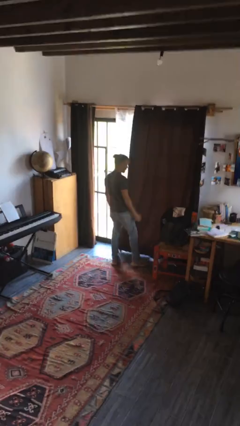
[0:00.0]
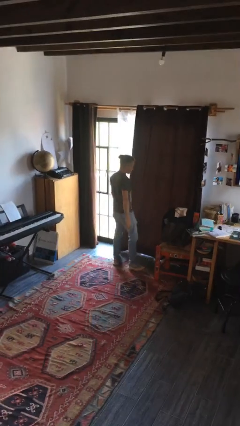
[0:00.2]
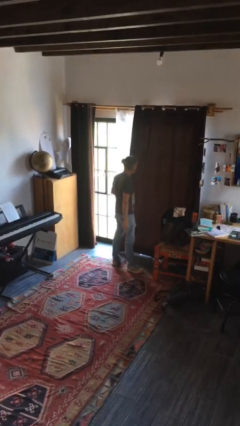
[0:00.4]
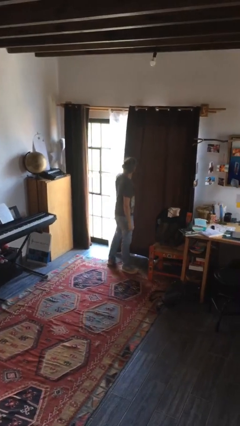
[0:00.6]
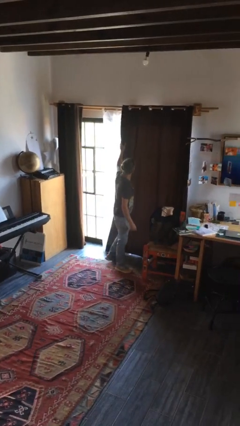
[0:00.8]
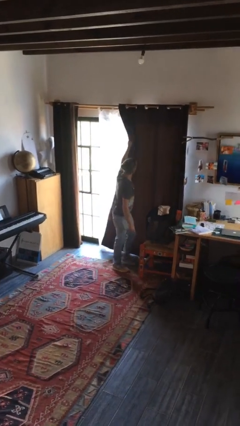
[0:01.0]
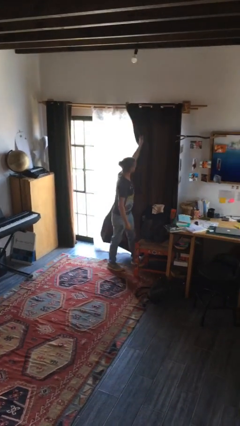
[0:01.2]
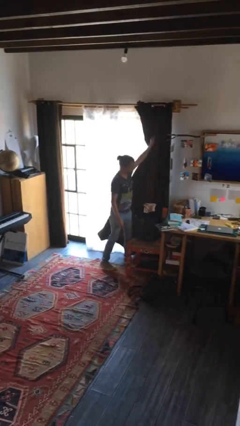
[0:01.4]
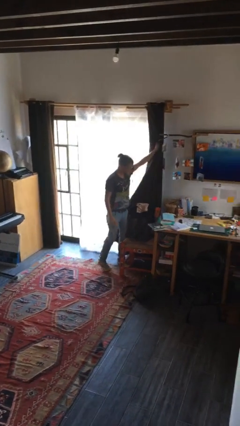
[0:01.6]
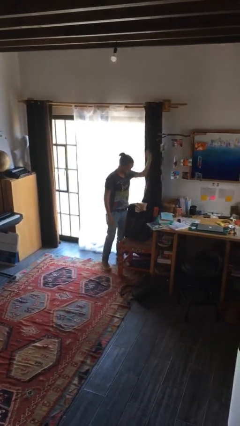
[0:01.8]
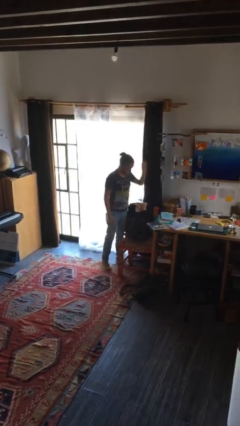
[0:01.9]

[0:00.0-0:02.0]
person opens curtains

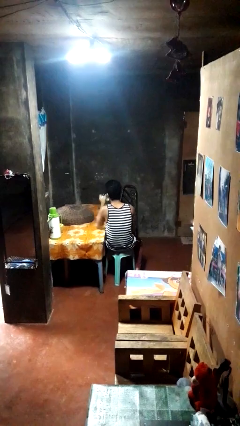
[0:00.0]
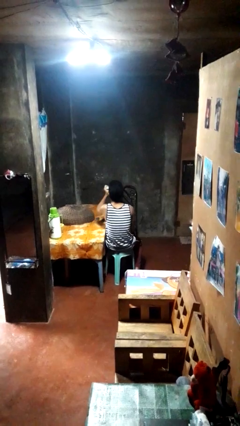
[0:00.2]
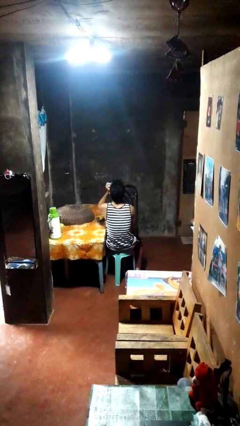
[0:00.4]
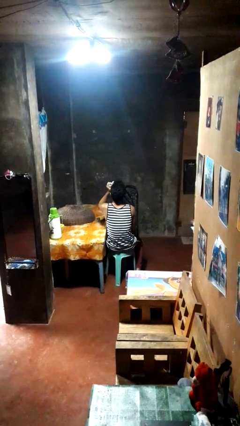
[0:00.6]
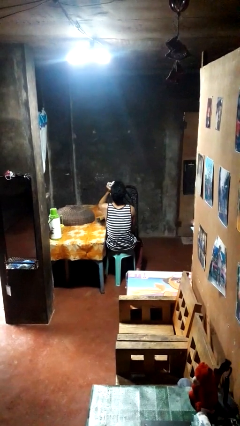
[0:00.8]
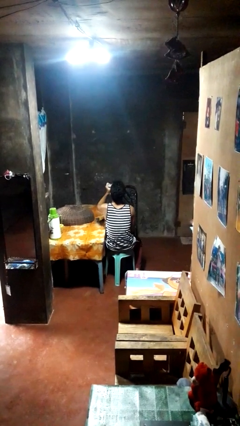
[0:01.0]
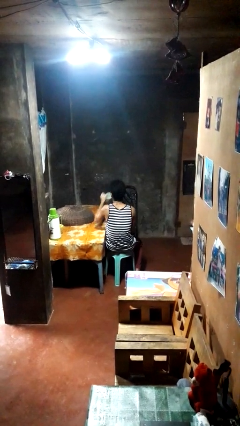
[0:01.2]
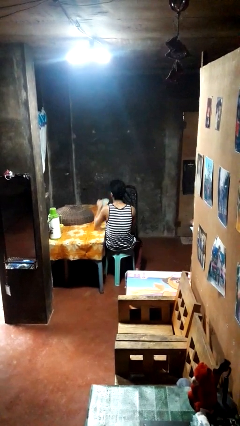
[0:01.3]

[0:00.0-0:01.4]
person drinks from mug

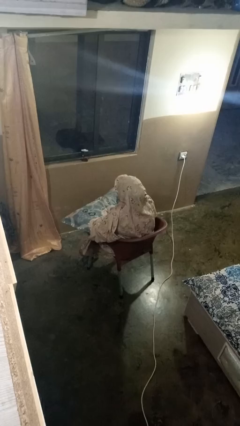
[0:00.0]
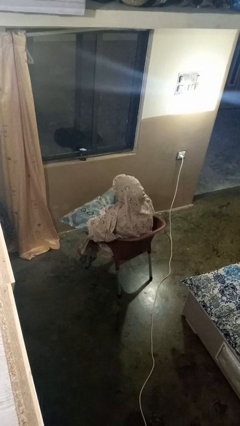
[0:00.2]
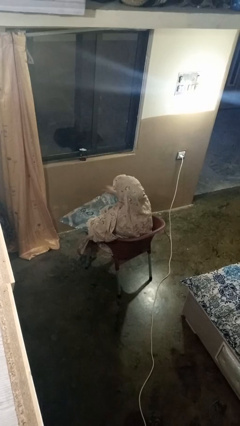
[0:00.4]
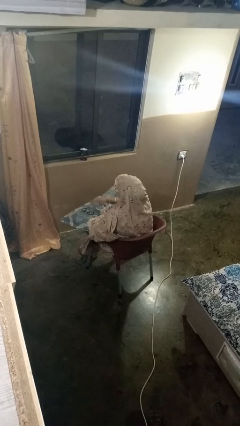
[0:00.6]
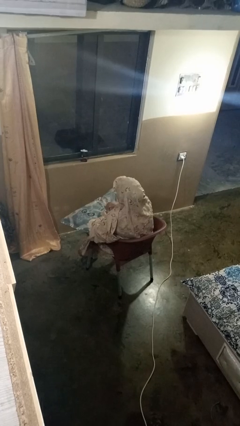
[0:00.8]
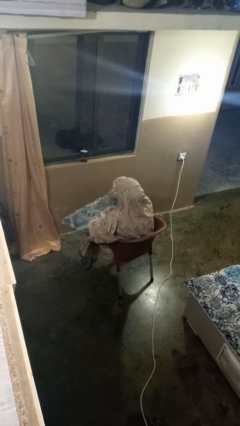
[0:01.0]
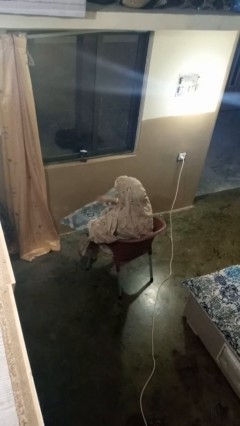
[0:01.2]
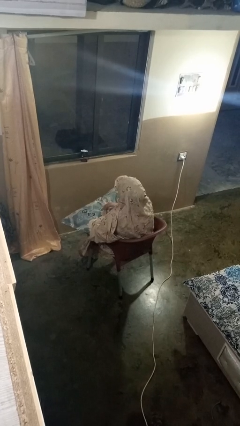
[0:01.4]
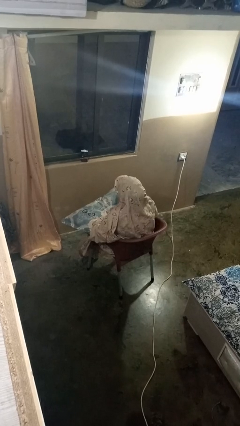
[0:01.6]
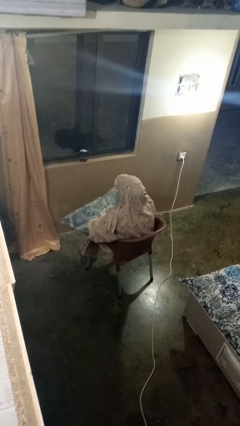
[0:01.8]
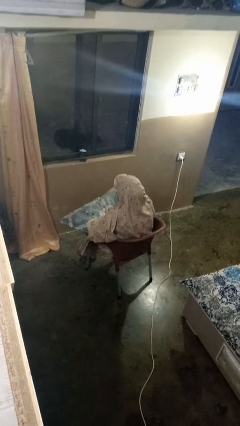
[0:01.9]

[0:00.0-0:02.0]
person waves hand over object

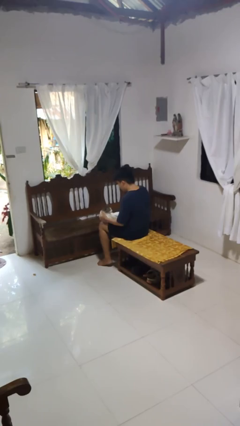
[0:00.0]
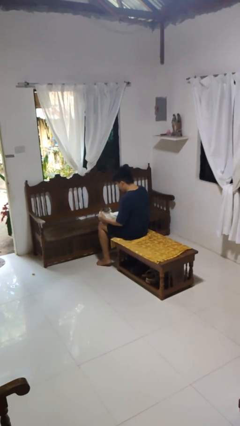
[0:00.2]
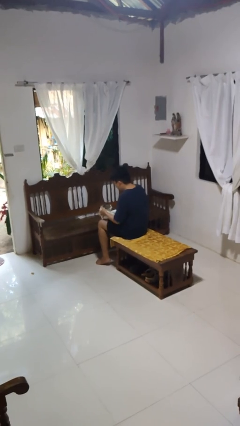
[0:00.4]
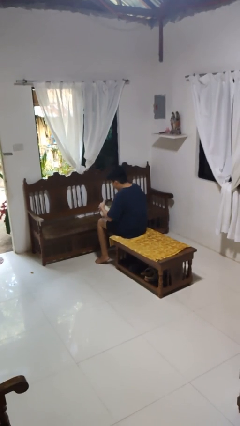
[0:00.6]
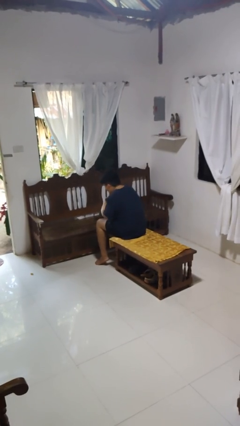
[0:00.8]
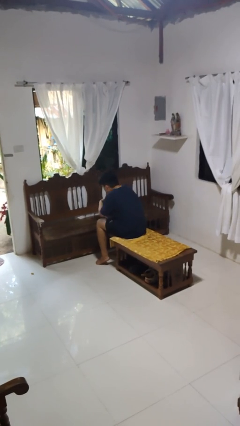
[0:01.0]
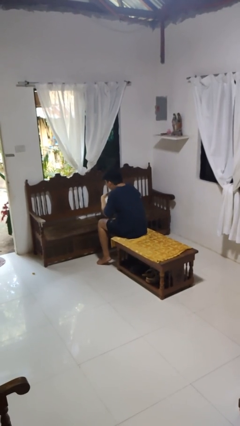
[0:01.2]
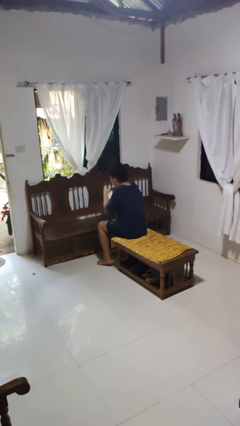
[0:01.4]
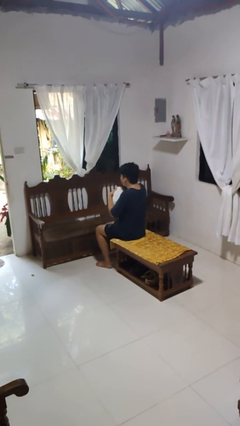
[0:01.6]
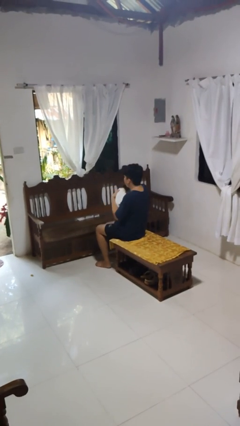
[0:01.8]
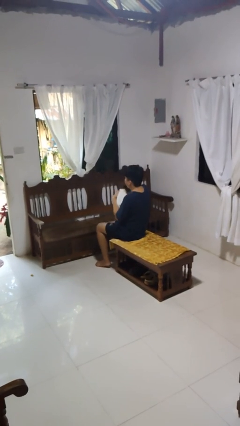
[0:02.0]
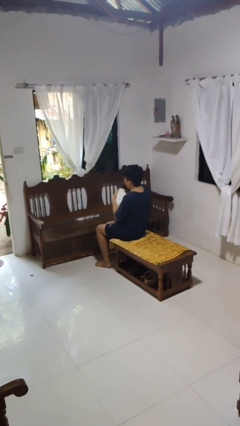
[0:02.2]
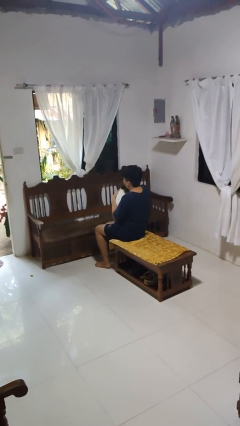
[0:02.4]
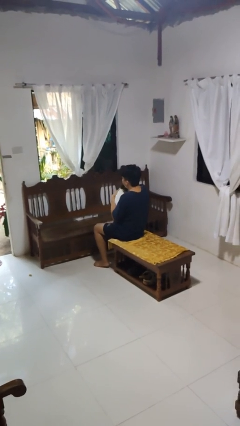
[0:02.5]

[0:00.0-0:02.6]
person hugs cat

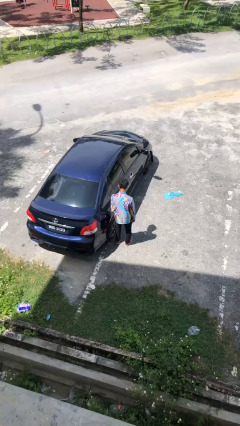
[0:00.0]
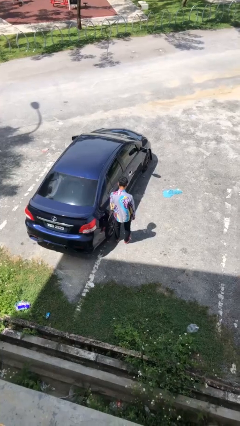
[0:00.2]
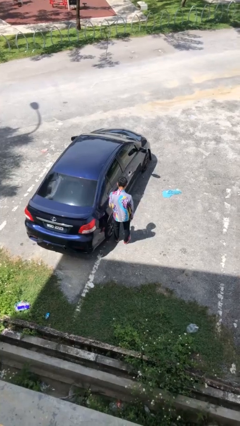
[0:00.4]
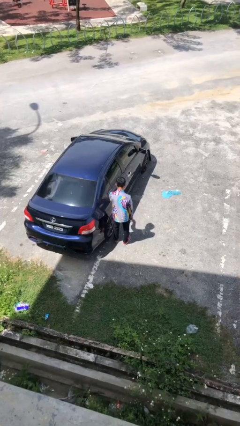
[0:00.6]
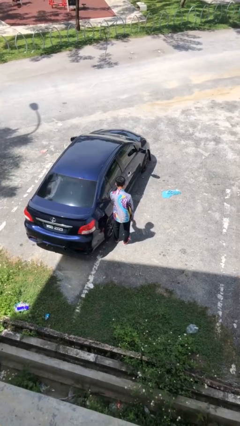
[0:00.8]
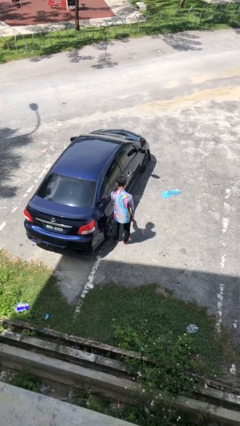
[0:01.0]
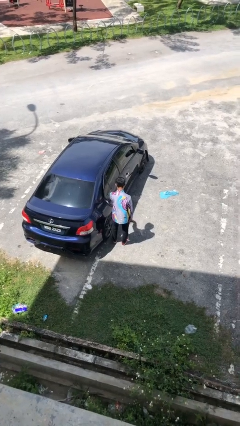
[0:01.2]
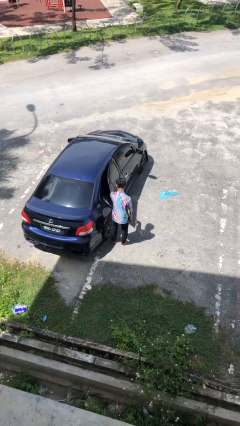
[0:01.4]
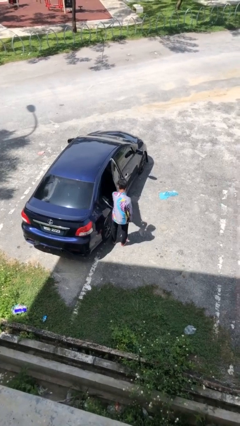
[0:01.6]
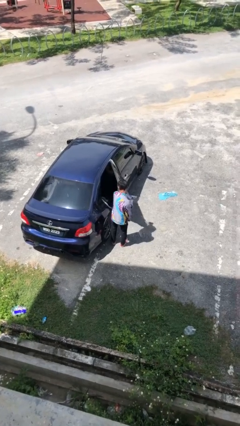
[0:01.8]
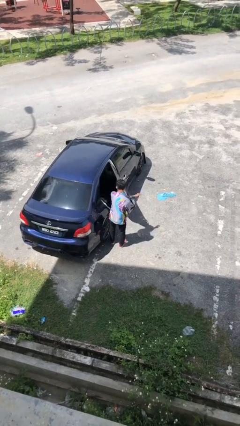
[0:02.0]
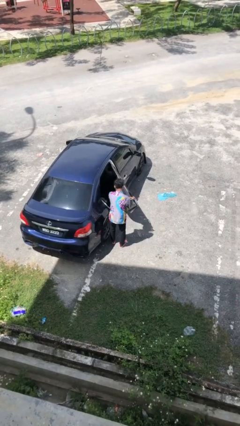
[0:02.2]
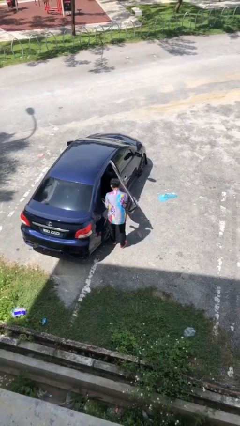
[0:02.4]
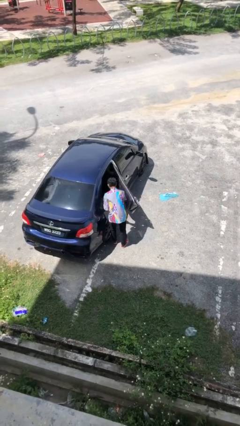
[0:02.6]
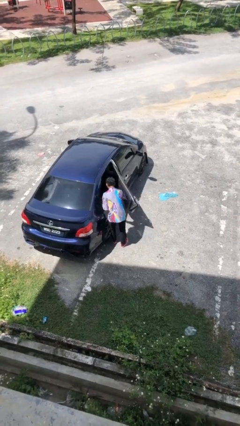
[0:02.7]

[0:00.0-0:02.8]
person opens car door

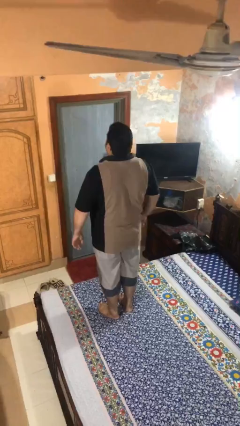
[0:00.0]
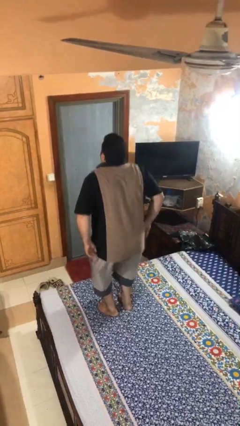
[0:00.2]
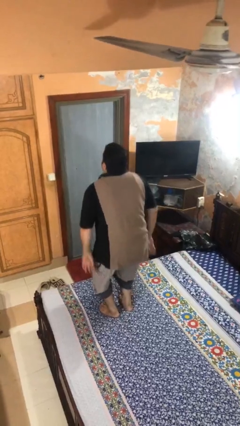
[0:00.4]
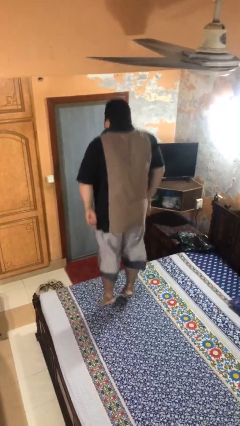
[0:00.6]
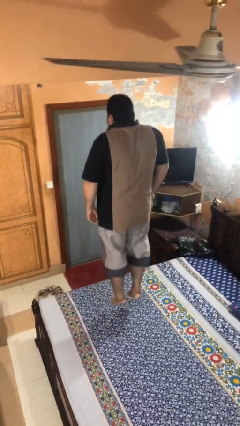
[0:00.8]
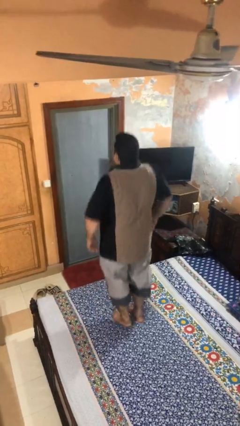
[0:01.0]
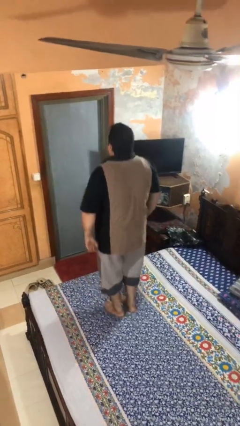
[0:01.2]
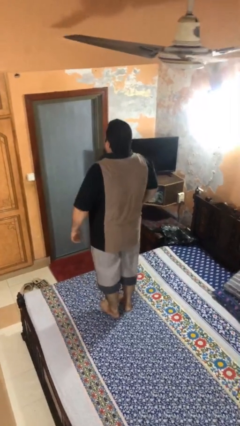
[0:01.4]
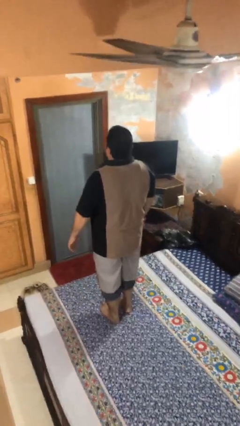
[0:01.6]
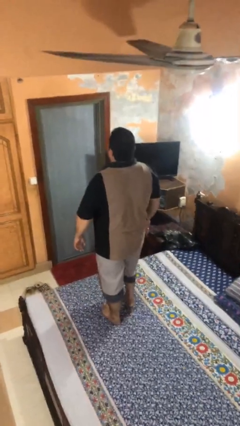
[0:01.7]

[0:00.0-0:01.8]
person jumps on bed

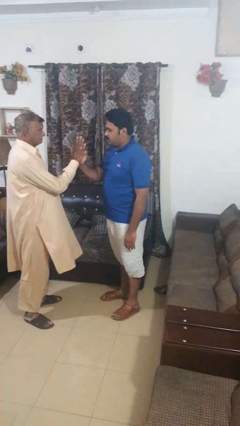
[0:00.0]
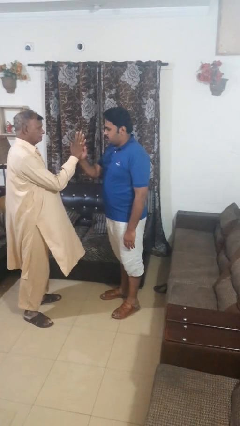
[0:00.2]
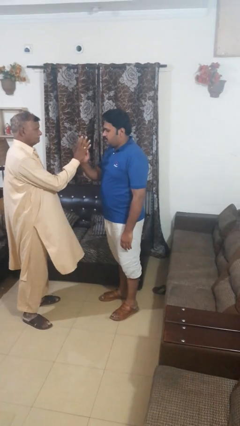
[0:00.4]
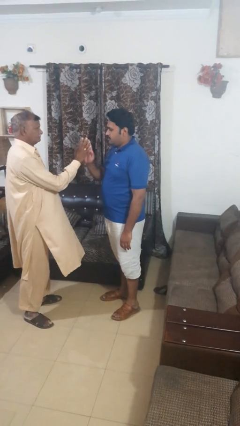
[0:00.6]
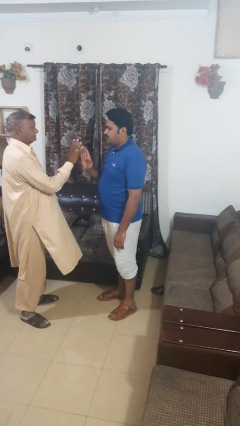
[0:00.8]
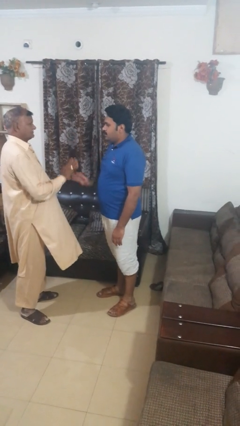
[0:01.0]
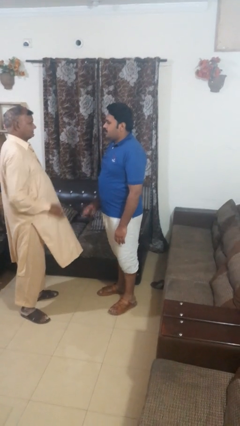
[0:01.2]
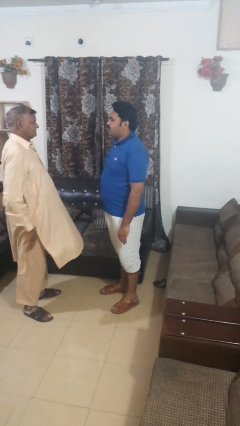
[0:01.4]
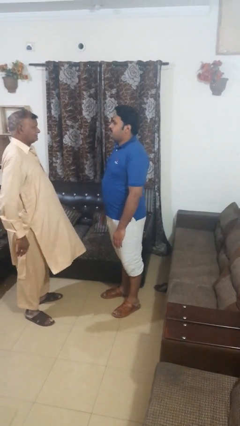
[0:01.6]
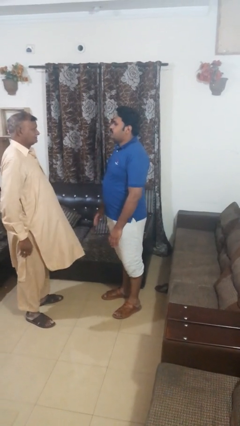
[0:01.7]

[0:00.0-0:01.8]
person highfives hand

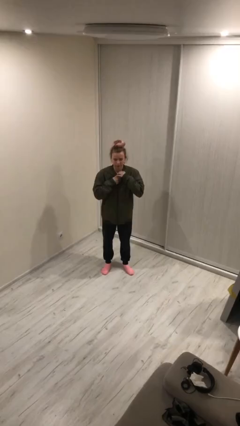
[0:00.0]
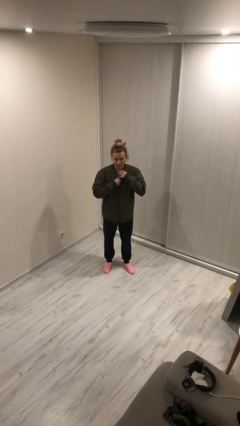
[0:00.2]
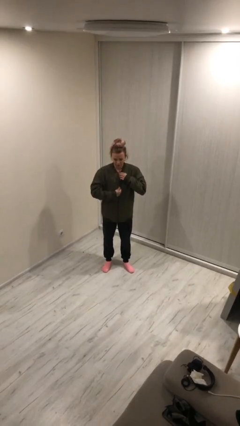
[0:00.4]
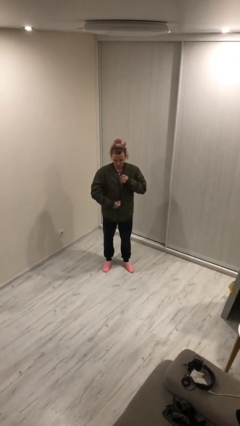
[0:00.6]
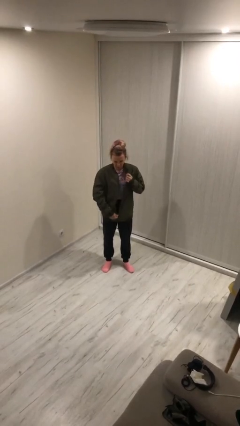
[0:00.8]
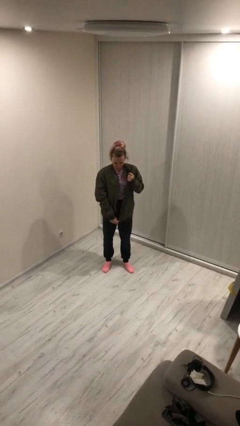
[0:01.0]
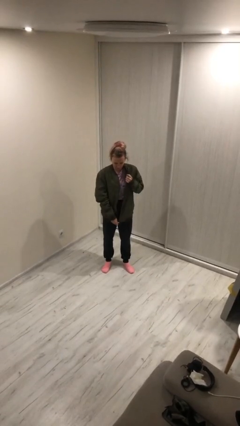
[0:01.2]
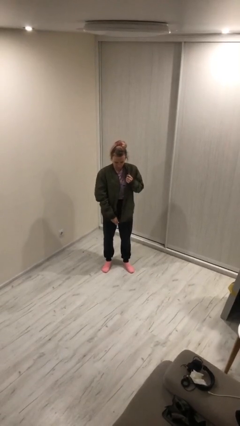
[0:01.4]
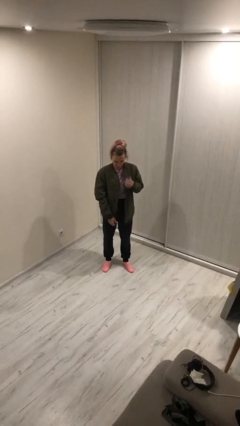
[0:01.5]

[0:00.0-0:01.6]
person unzips jacket

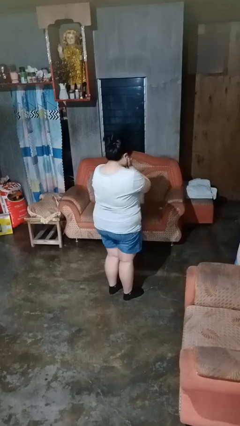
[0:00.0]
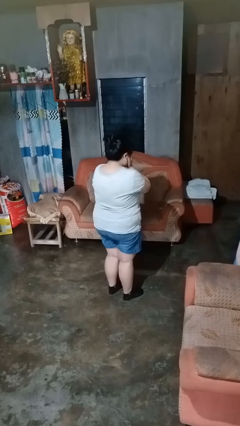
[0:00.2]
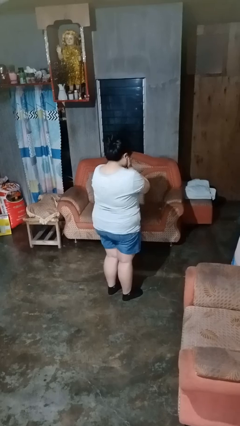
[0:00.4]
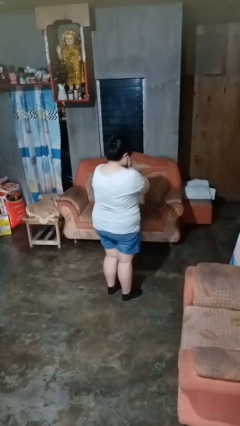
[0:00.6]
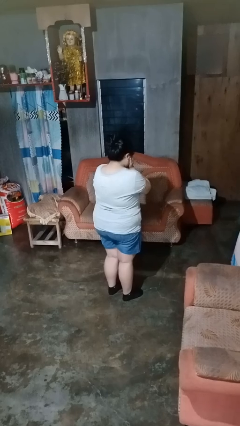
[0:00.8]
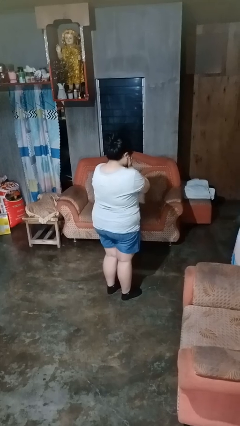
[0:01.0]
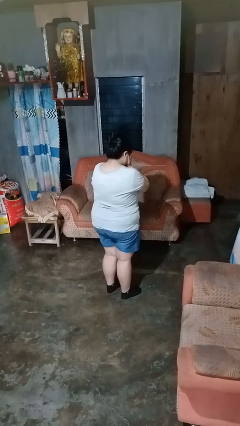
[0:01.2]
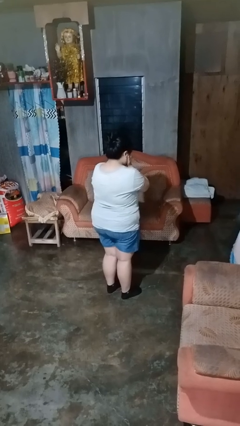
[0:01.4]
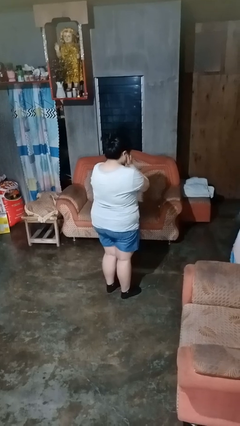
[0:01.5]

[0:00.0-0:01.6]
person covers face with hands
